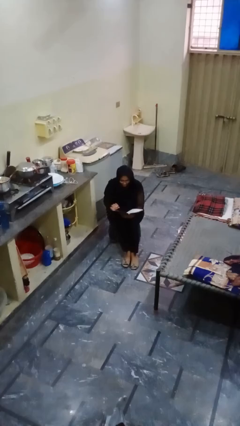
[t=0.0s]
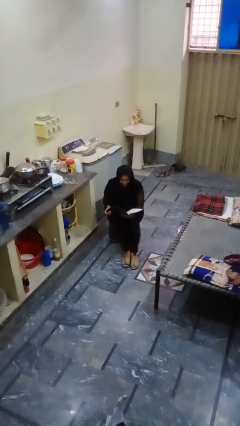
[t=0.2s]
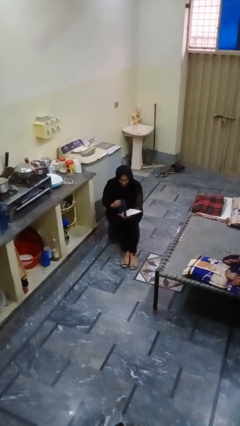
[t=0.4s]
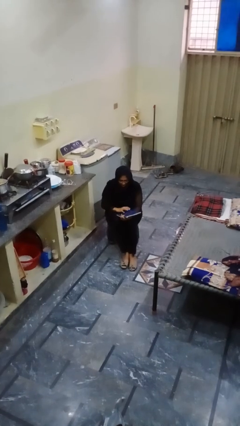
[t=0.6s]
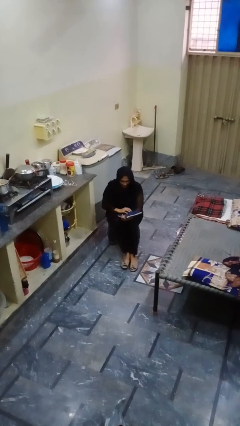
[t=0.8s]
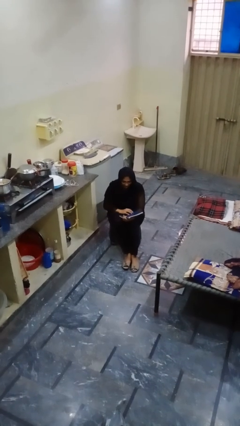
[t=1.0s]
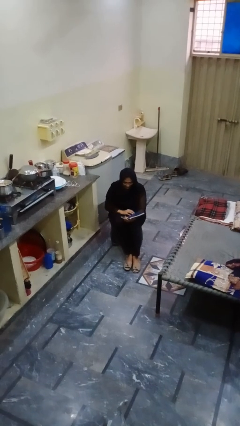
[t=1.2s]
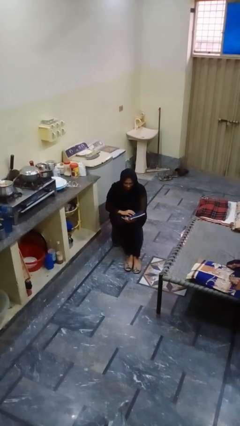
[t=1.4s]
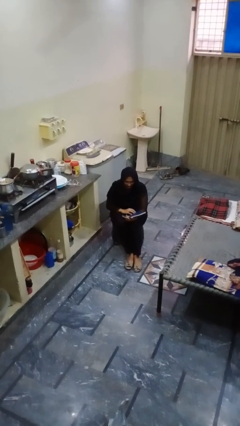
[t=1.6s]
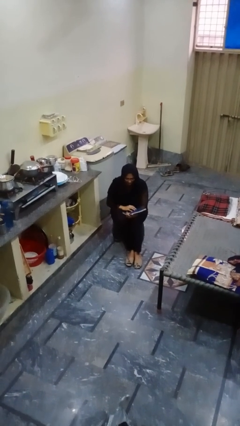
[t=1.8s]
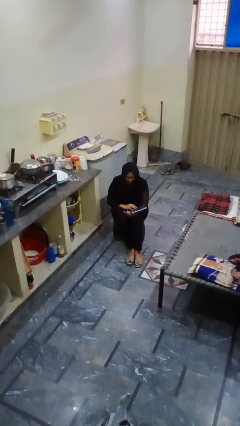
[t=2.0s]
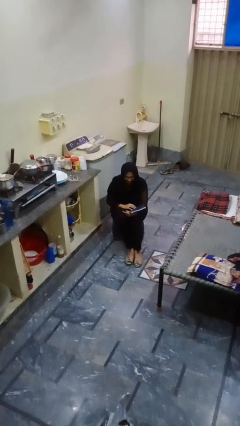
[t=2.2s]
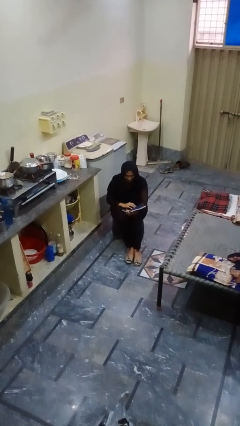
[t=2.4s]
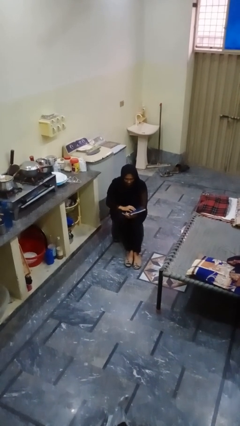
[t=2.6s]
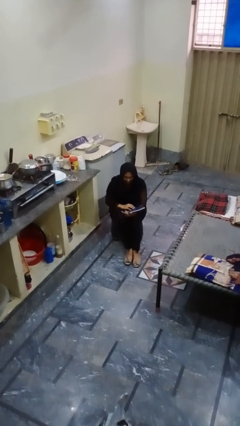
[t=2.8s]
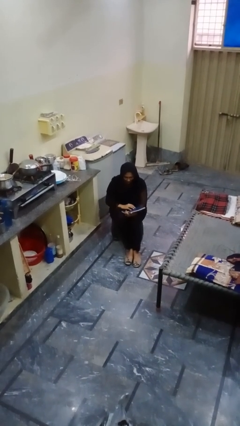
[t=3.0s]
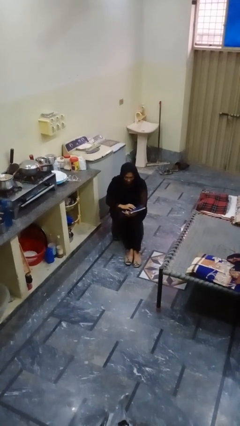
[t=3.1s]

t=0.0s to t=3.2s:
person reads magazine

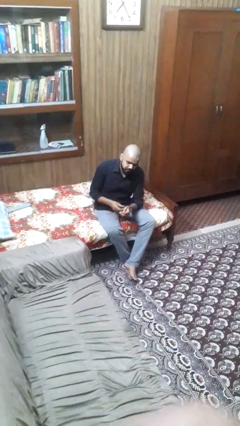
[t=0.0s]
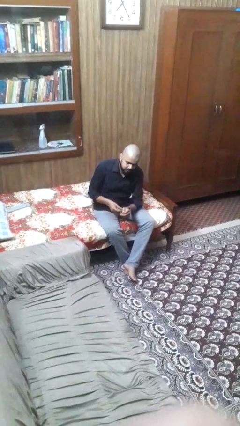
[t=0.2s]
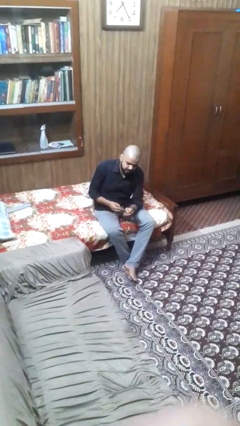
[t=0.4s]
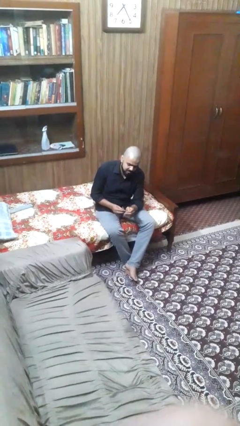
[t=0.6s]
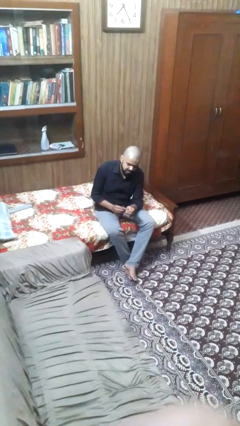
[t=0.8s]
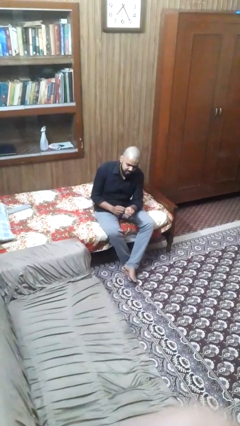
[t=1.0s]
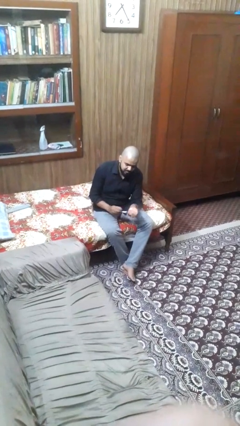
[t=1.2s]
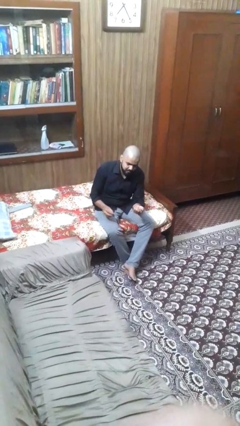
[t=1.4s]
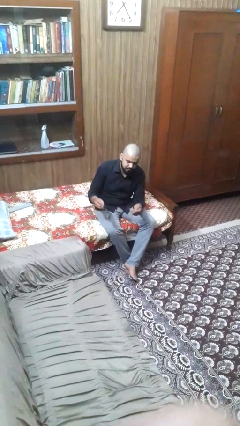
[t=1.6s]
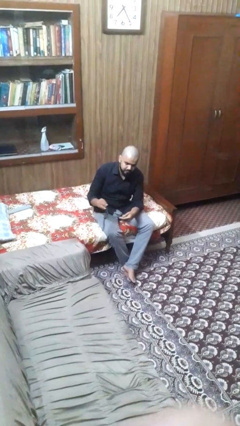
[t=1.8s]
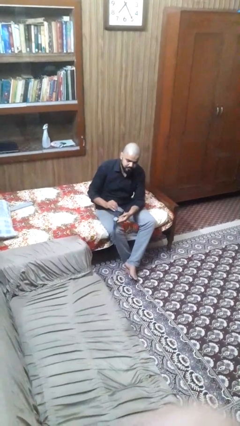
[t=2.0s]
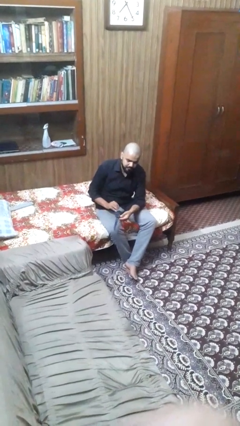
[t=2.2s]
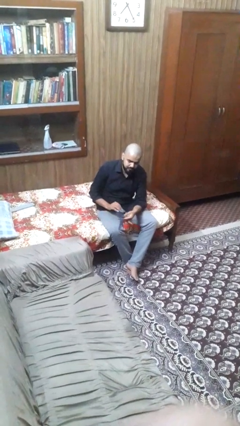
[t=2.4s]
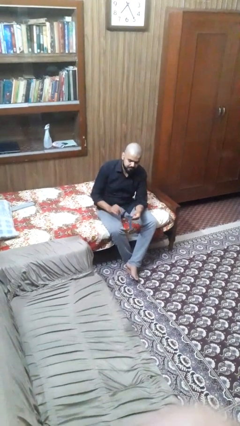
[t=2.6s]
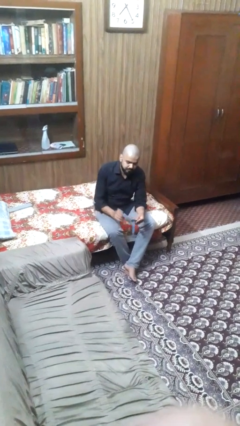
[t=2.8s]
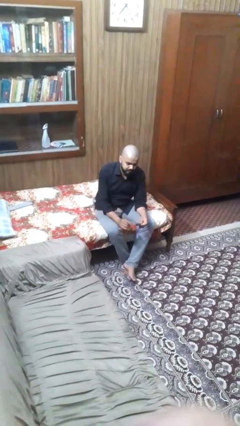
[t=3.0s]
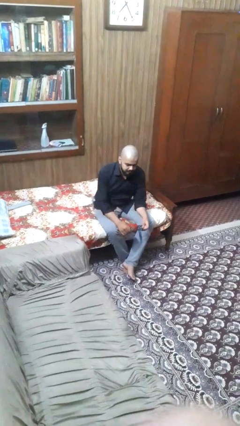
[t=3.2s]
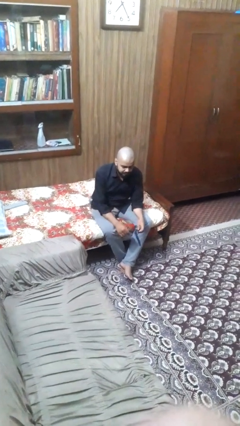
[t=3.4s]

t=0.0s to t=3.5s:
person takes off wristwatch

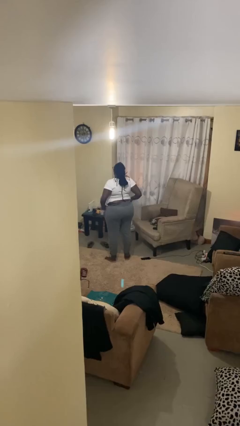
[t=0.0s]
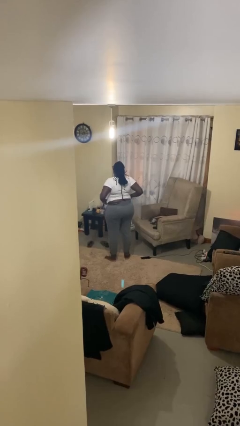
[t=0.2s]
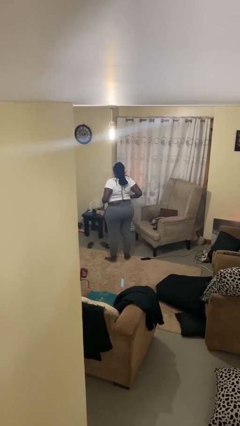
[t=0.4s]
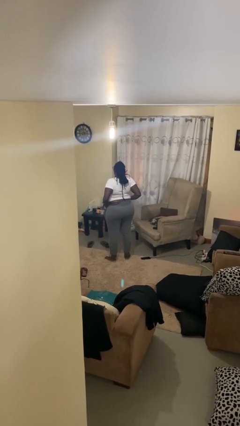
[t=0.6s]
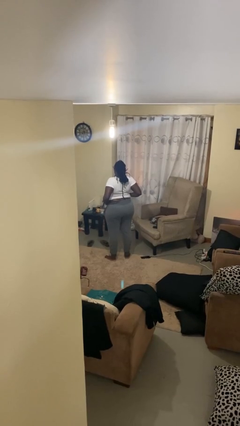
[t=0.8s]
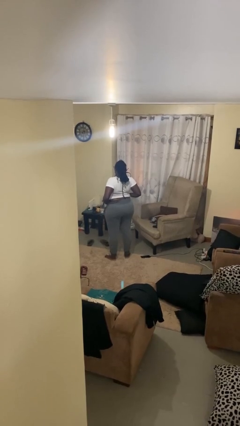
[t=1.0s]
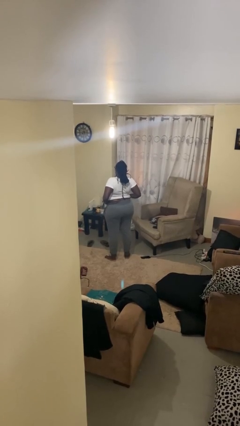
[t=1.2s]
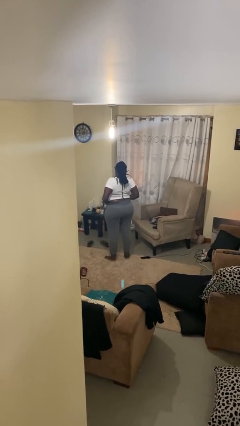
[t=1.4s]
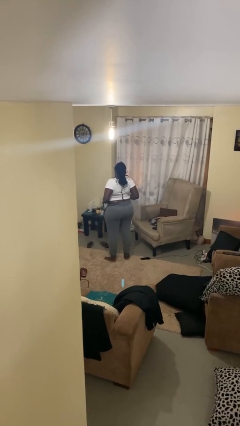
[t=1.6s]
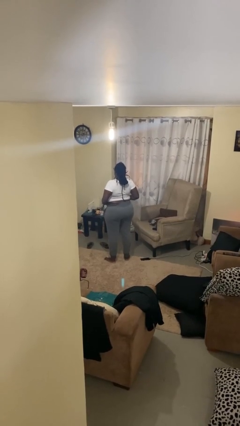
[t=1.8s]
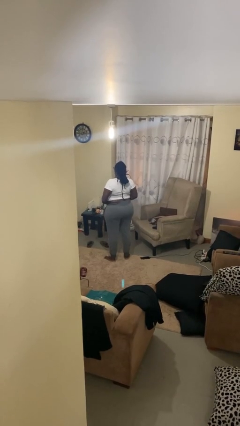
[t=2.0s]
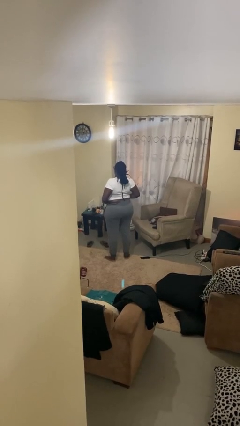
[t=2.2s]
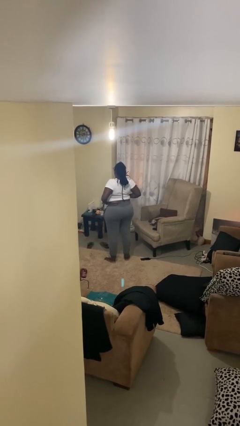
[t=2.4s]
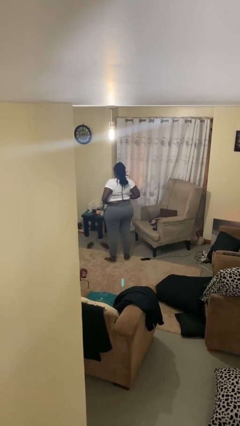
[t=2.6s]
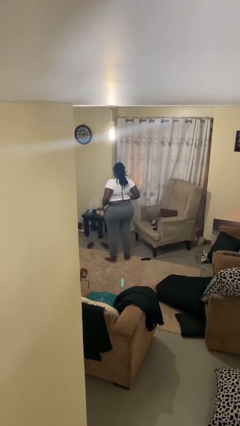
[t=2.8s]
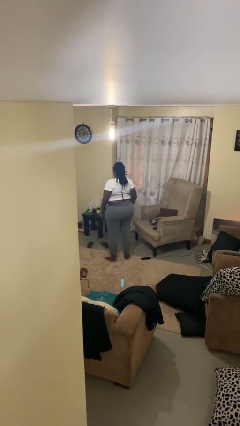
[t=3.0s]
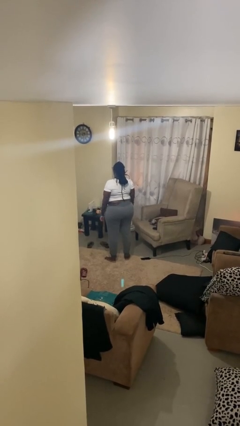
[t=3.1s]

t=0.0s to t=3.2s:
person hikes up pants

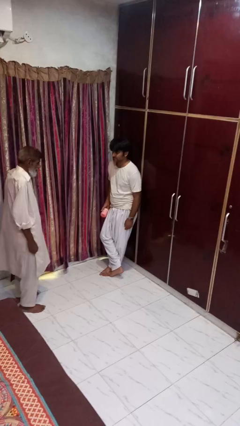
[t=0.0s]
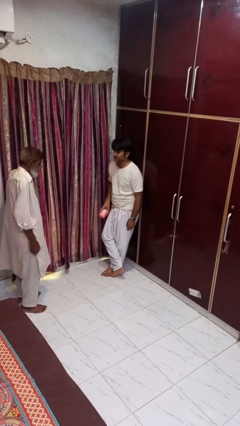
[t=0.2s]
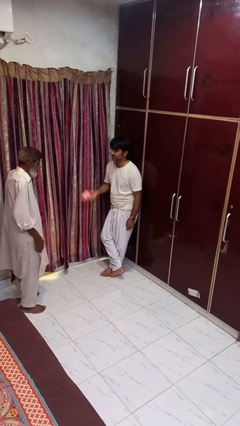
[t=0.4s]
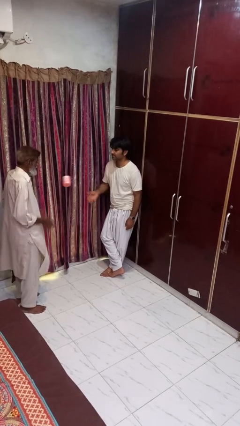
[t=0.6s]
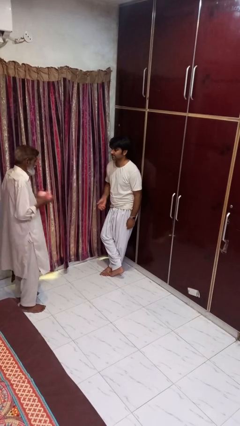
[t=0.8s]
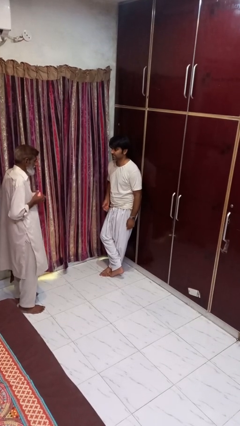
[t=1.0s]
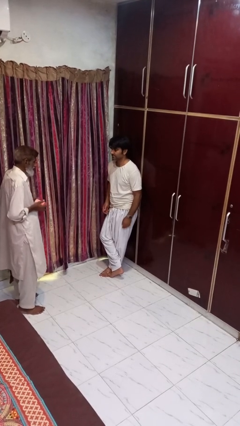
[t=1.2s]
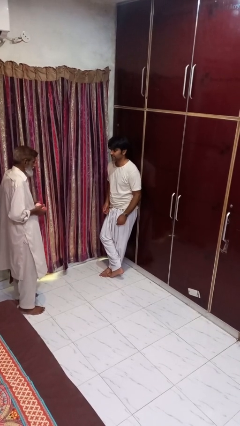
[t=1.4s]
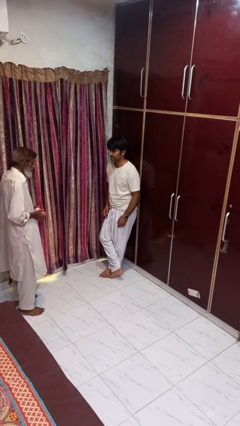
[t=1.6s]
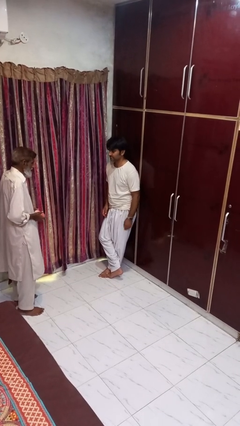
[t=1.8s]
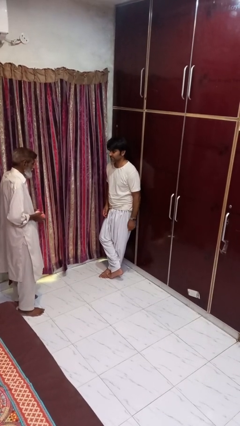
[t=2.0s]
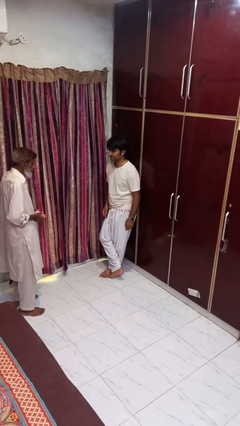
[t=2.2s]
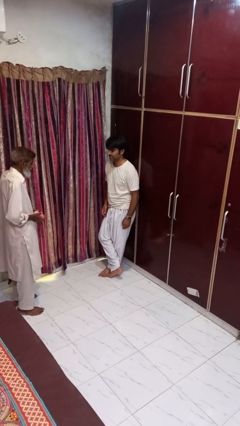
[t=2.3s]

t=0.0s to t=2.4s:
person throws object to person

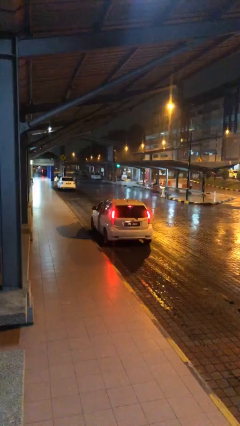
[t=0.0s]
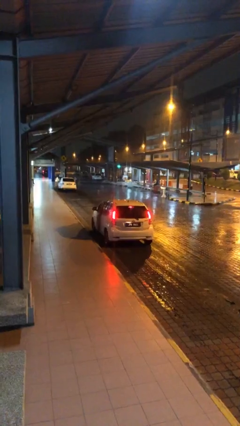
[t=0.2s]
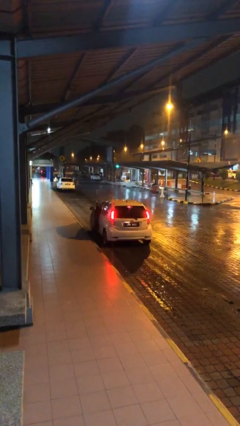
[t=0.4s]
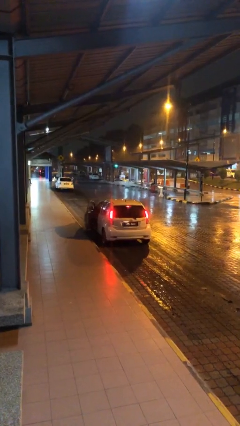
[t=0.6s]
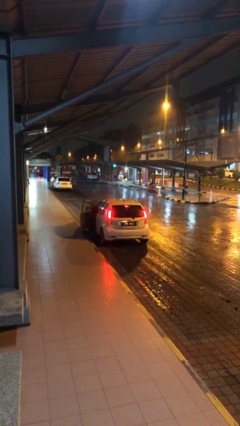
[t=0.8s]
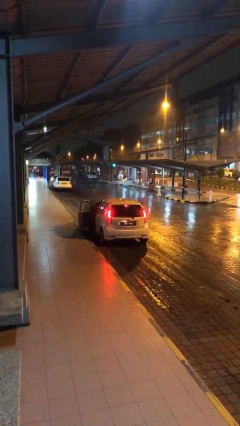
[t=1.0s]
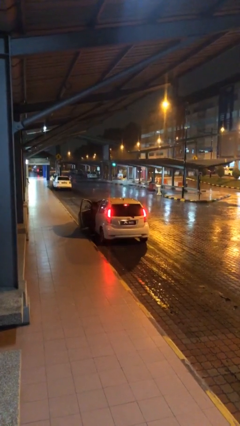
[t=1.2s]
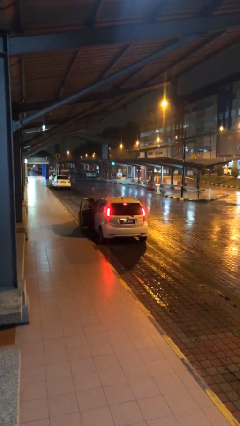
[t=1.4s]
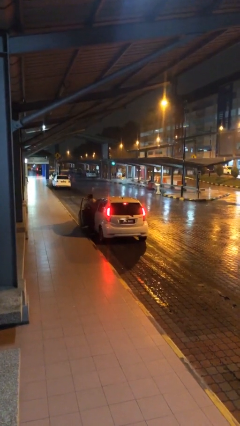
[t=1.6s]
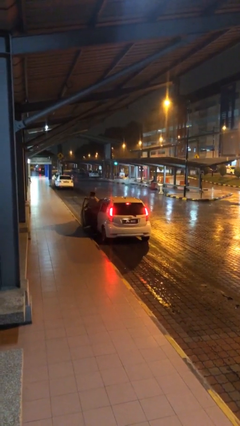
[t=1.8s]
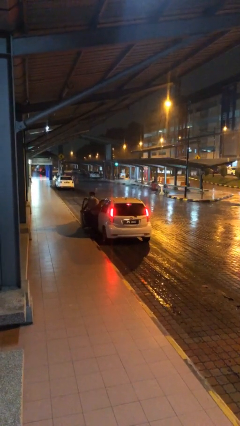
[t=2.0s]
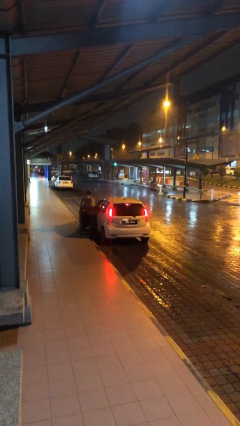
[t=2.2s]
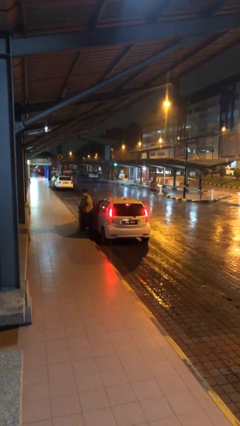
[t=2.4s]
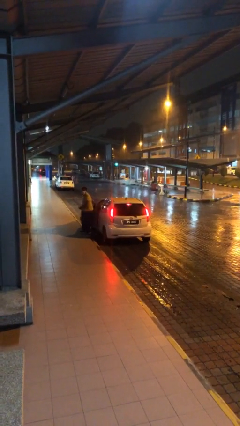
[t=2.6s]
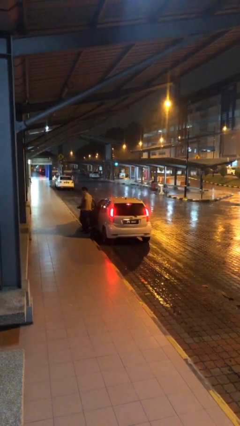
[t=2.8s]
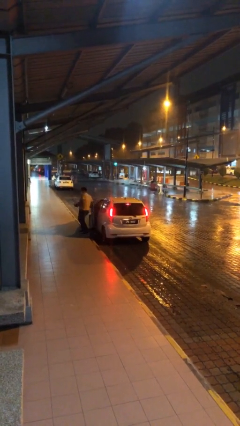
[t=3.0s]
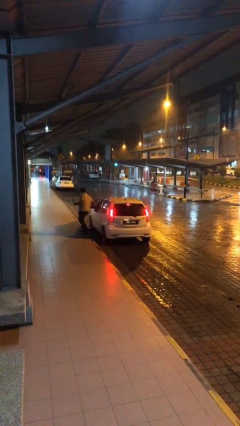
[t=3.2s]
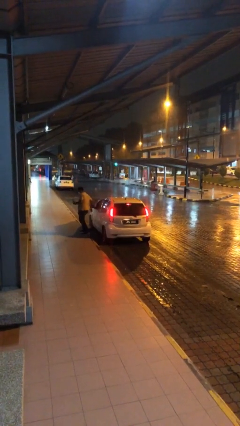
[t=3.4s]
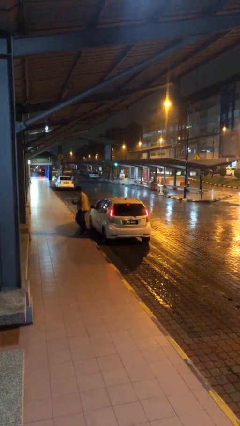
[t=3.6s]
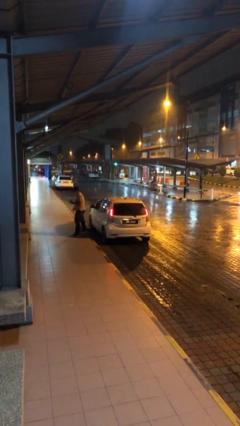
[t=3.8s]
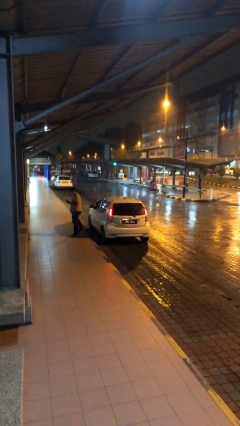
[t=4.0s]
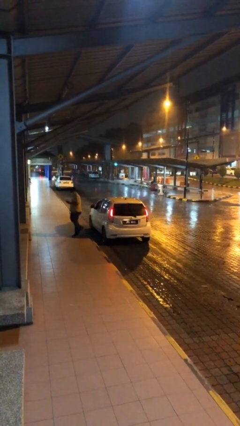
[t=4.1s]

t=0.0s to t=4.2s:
car drops off person

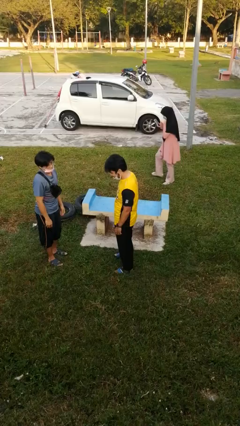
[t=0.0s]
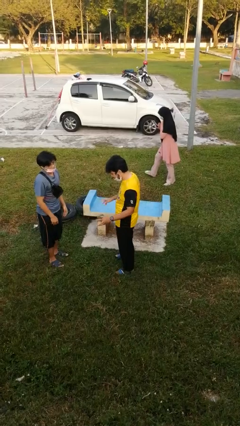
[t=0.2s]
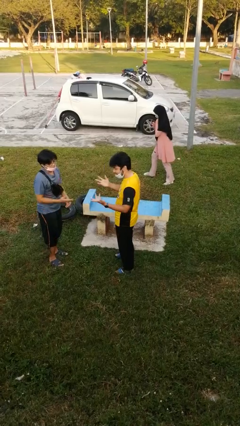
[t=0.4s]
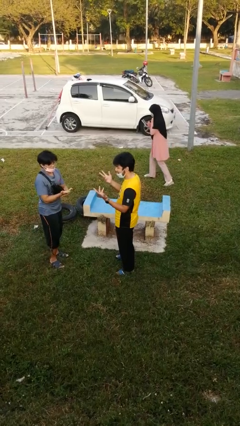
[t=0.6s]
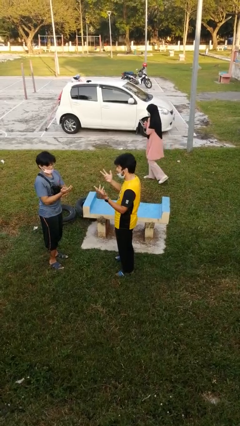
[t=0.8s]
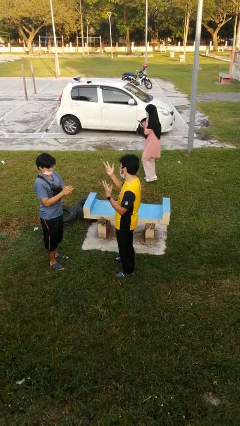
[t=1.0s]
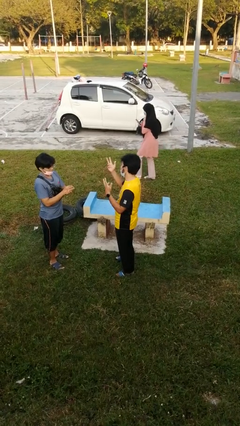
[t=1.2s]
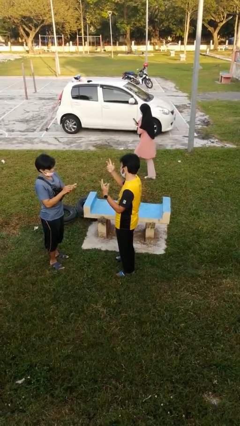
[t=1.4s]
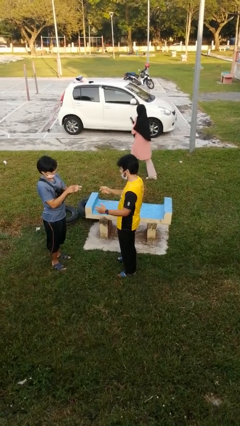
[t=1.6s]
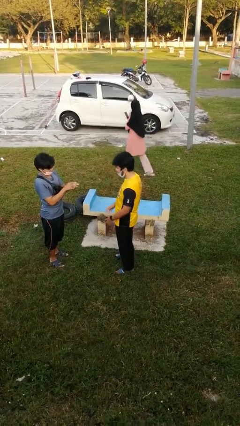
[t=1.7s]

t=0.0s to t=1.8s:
person talks to person
